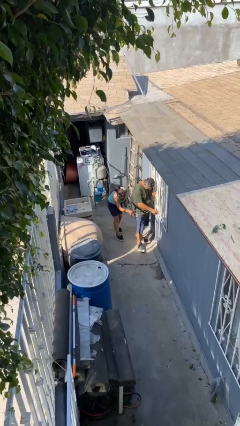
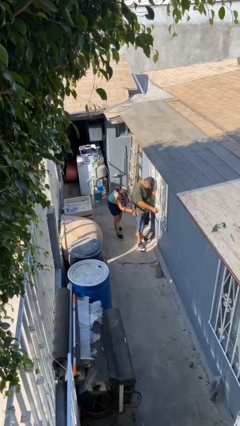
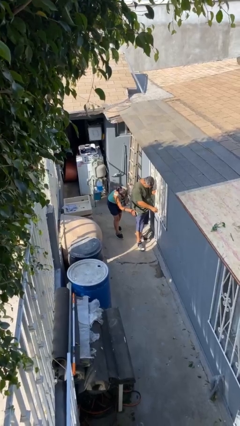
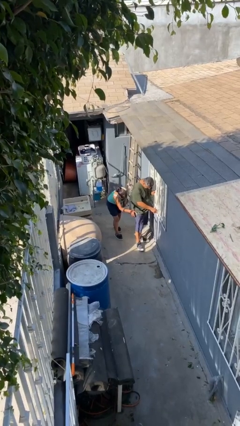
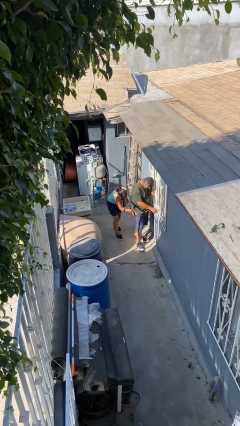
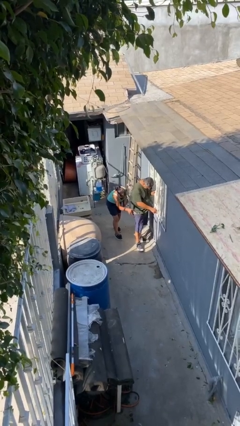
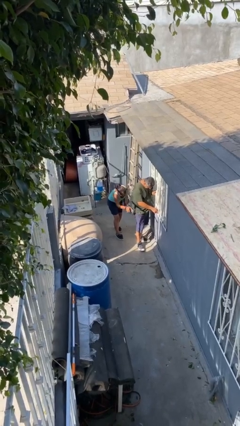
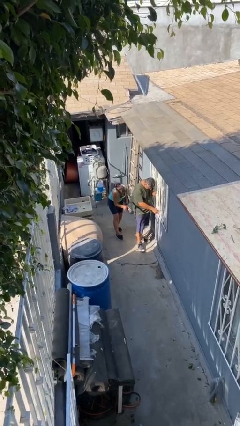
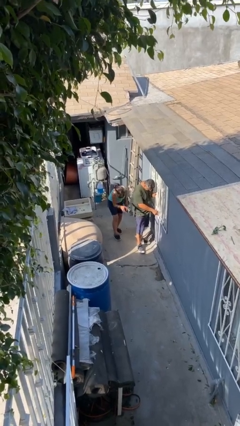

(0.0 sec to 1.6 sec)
person steals object from person

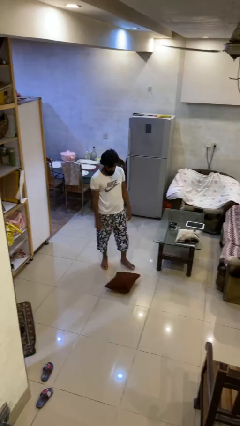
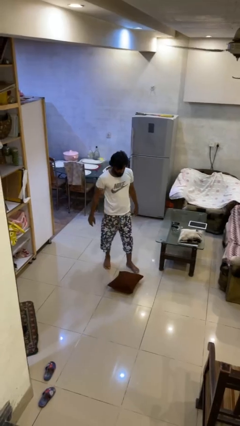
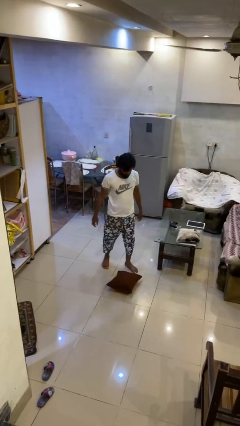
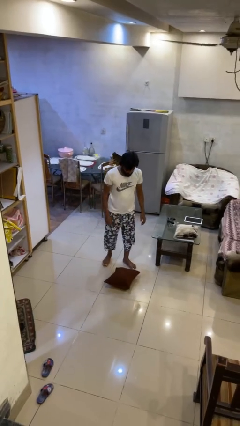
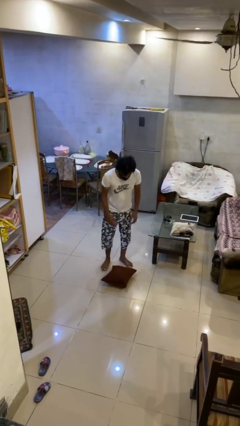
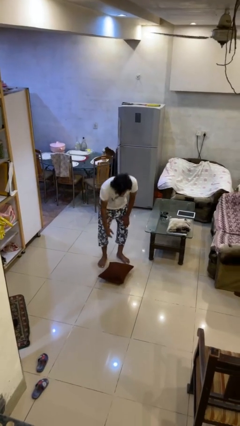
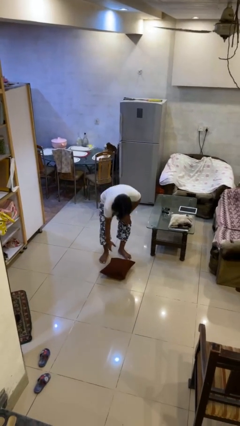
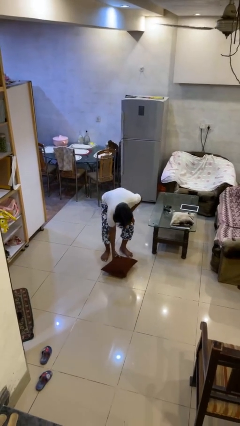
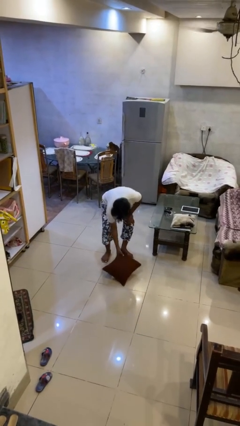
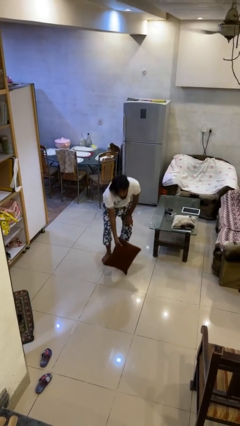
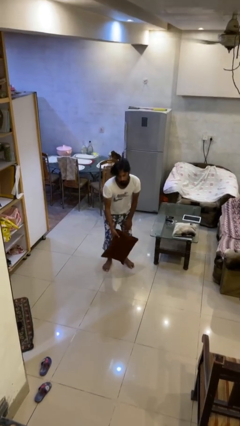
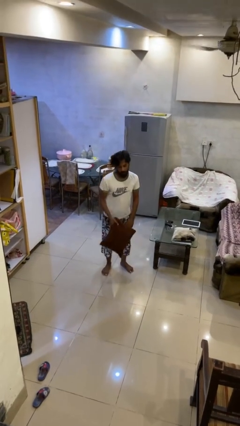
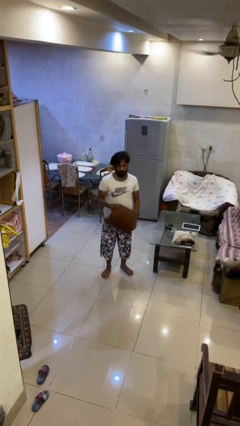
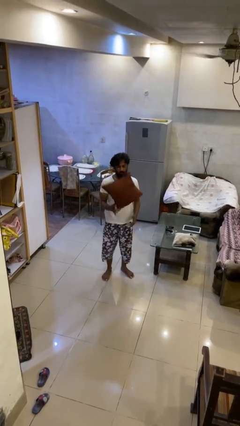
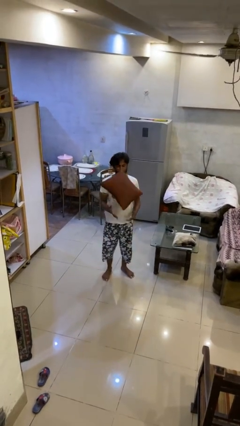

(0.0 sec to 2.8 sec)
person picks up object from floor

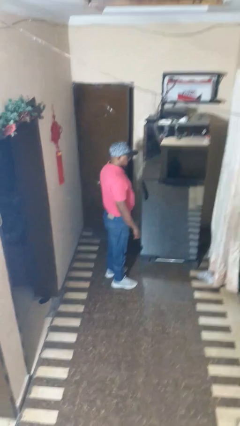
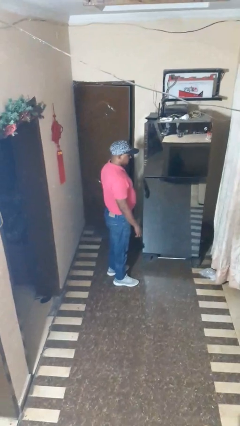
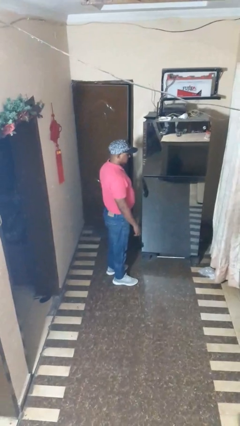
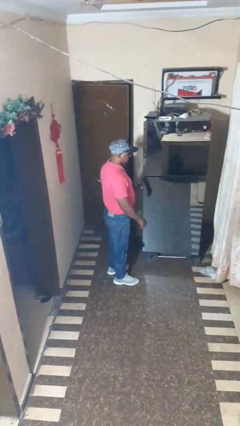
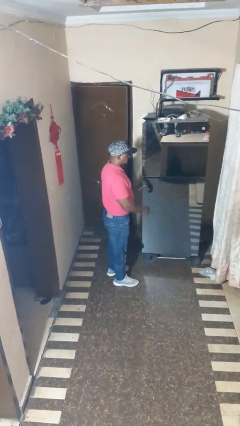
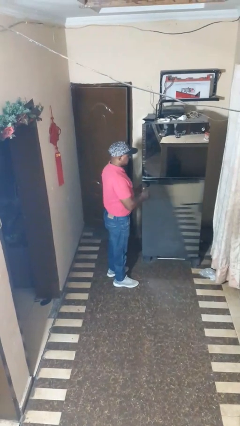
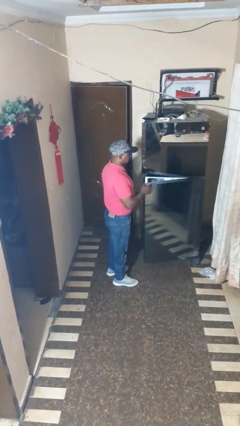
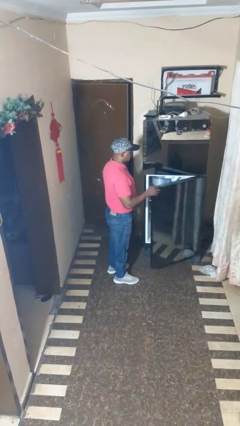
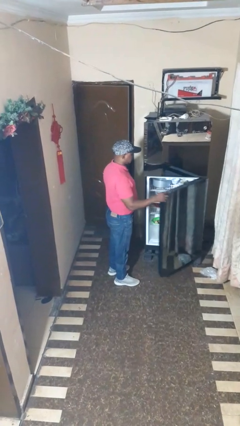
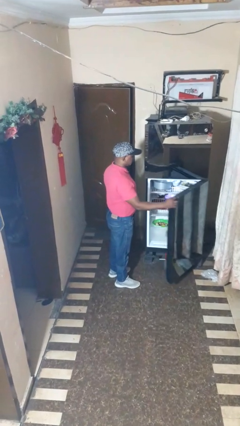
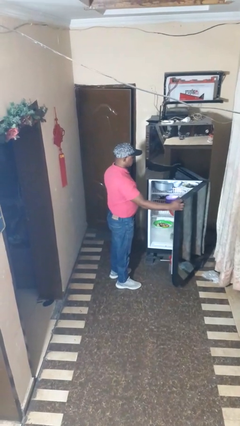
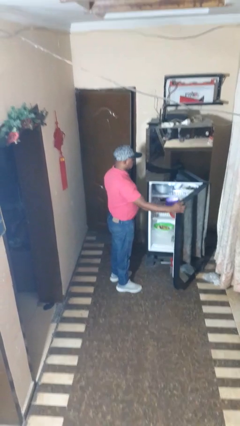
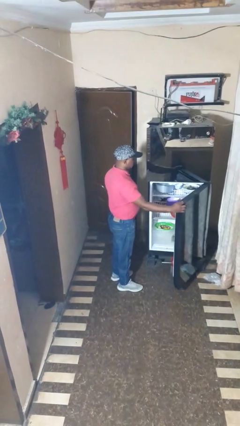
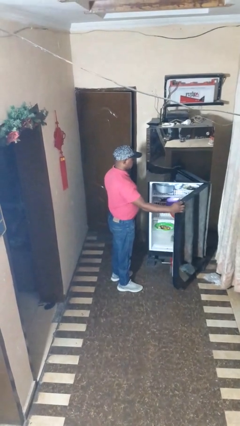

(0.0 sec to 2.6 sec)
person opens refrigerator

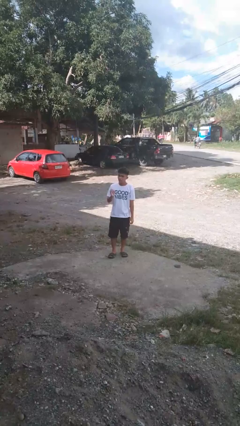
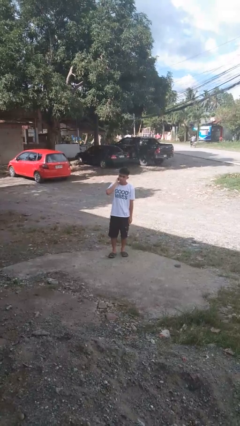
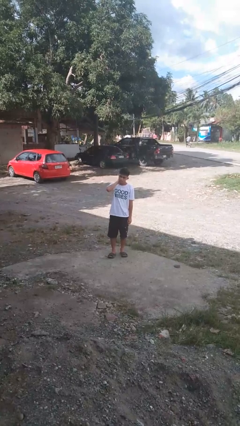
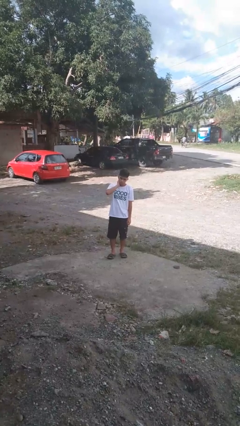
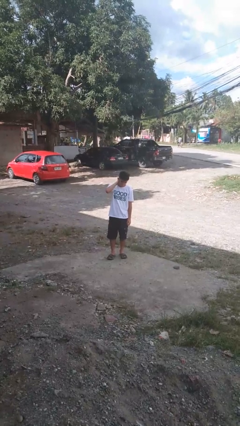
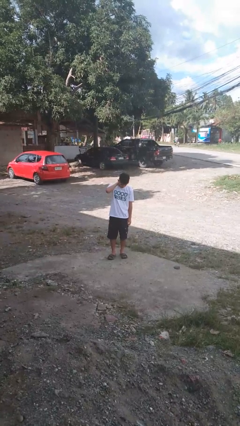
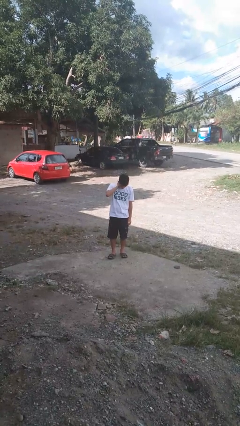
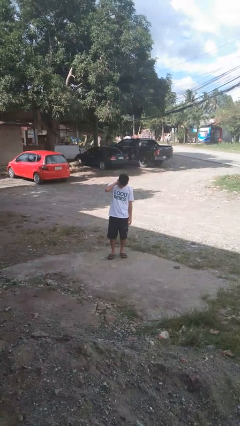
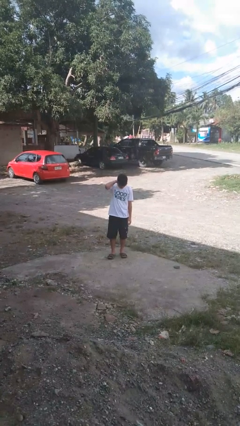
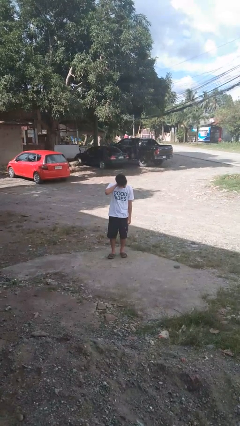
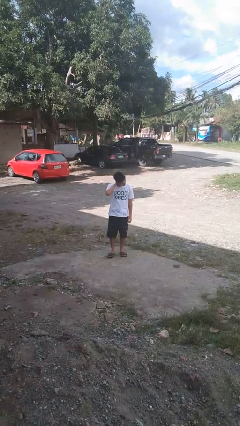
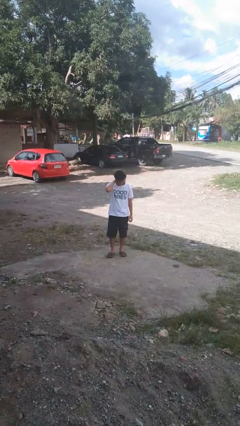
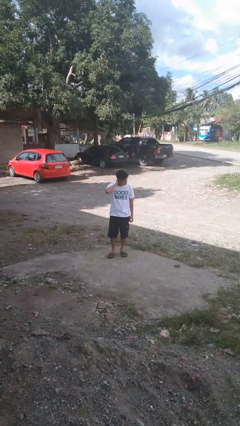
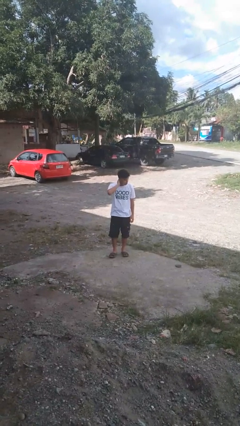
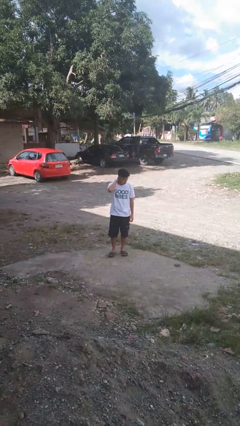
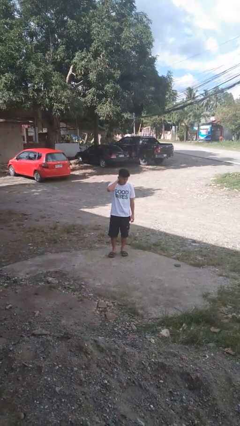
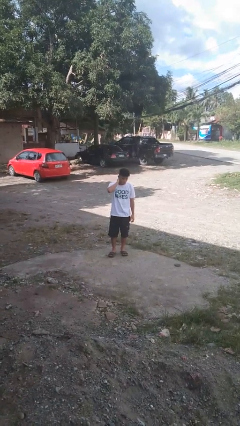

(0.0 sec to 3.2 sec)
person rubs neck

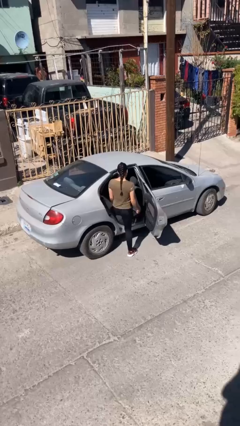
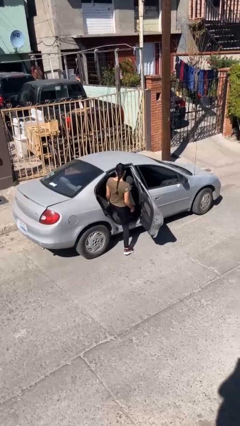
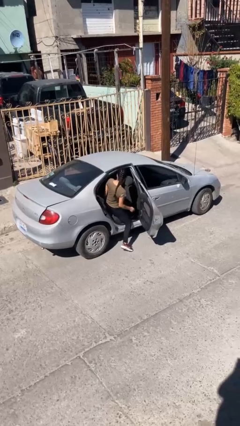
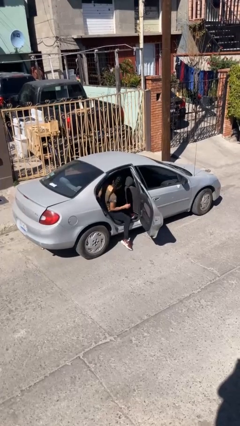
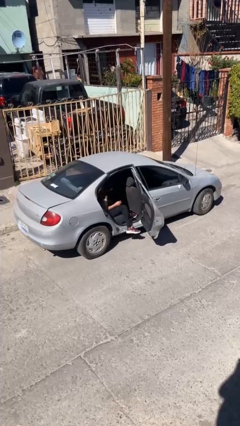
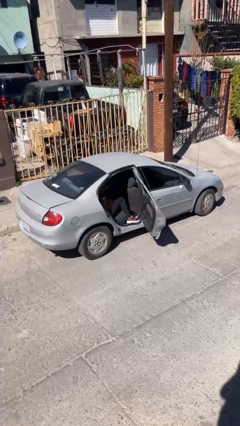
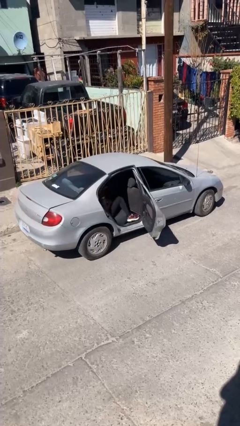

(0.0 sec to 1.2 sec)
person enters car

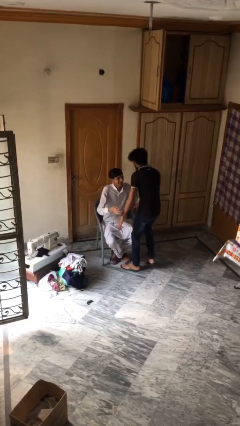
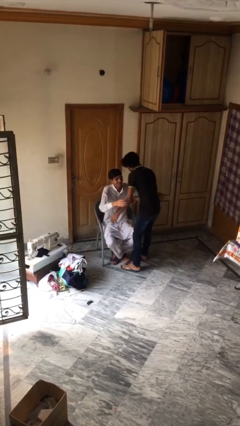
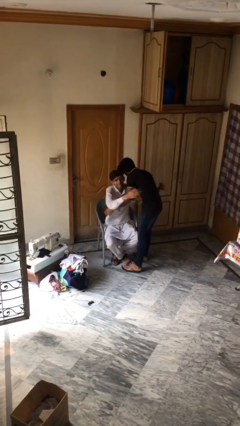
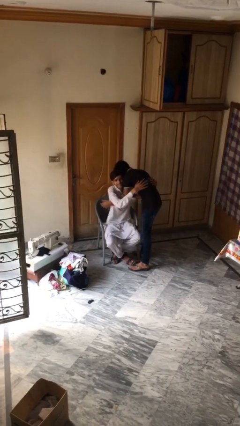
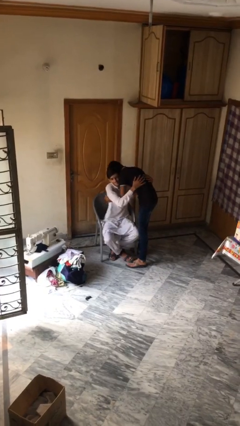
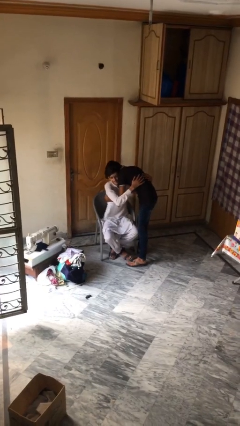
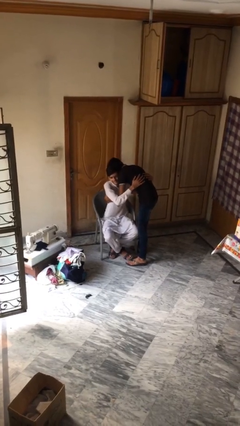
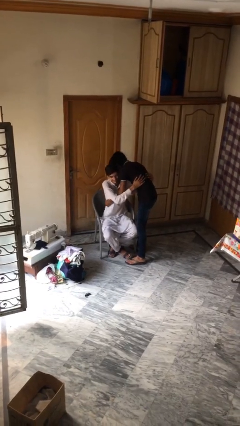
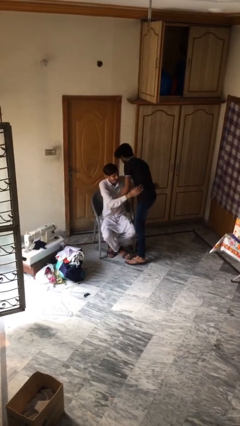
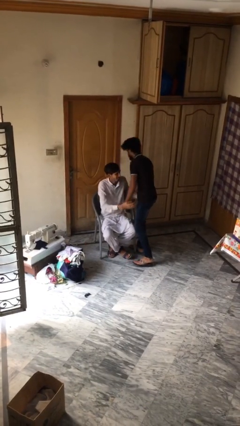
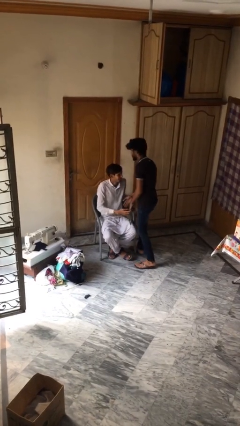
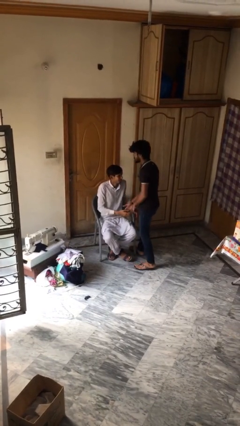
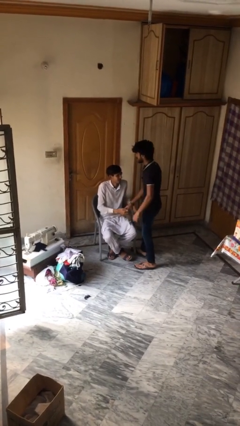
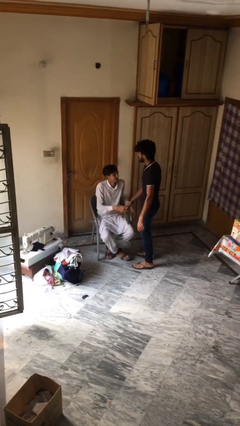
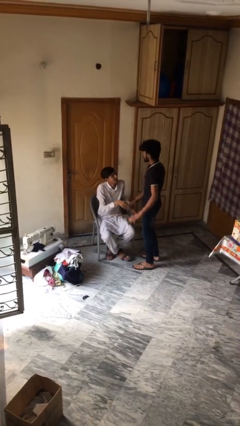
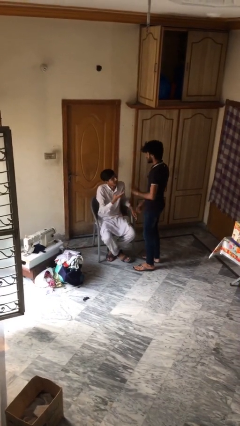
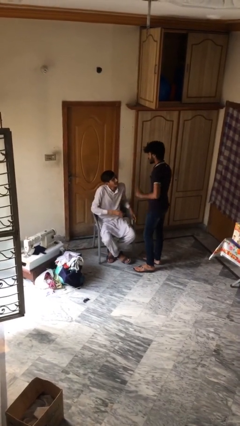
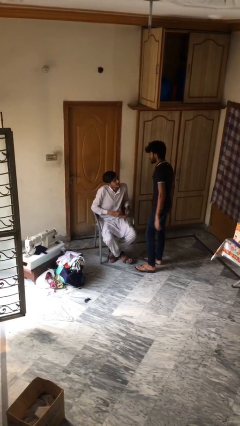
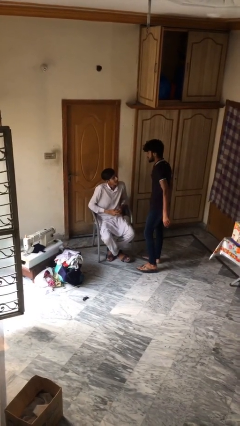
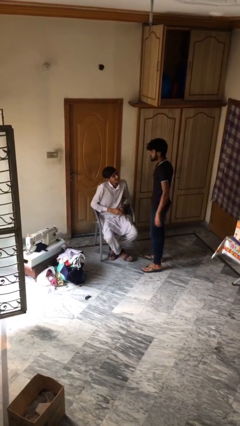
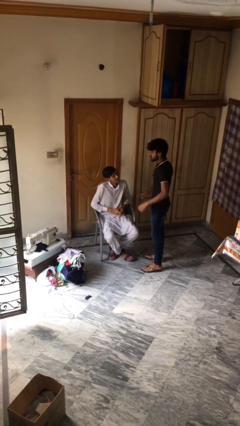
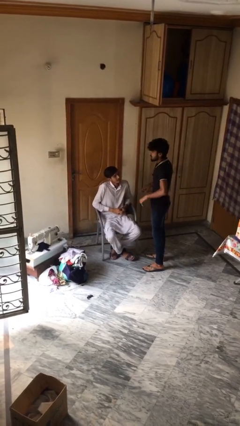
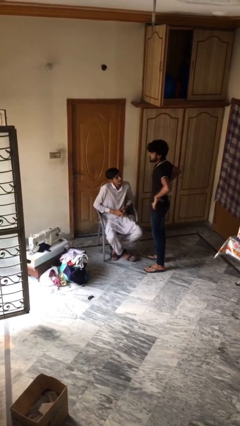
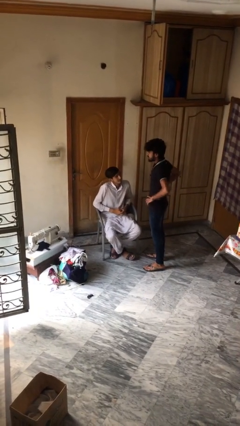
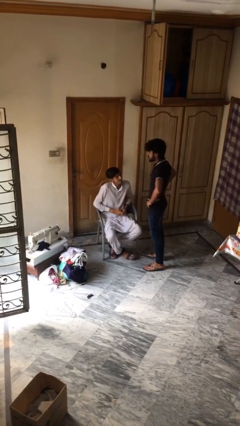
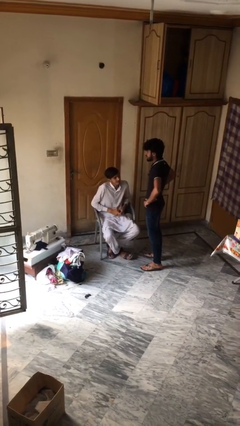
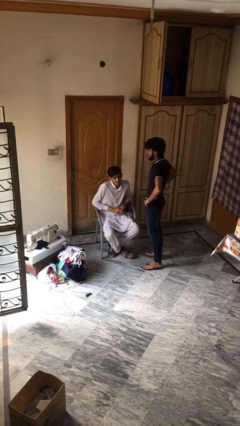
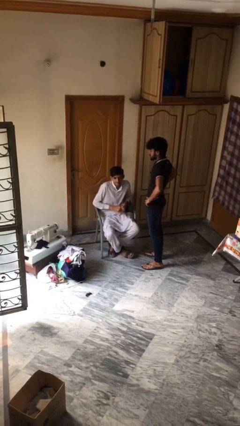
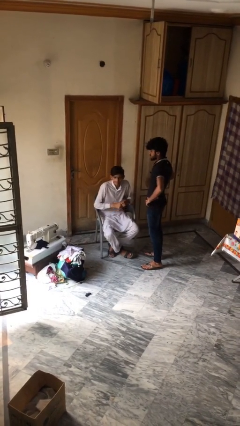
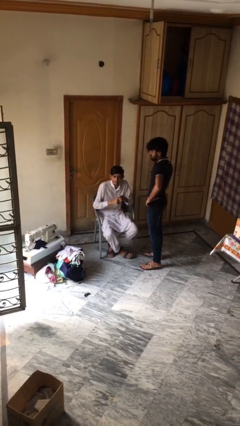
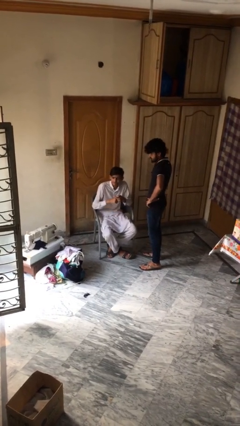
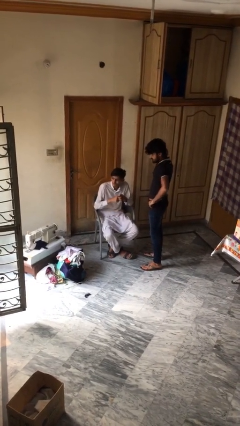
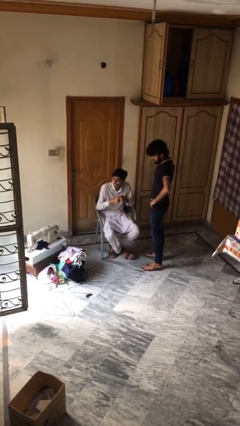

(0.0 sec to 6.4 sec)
person embraces person
